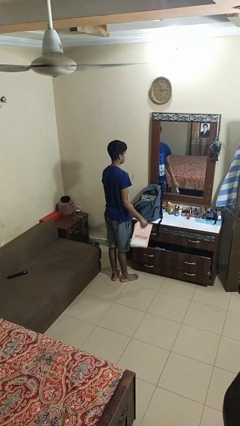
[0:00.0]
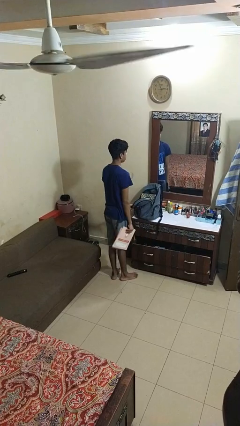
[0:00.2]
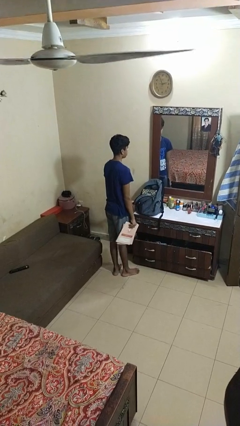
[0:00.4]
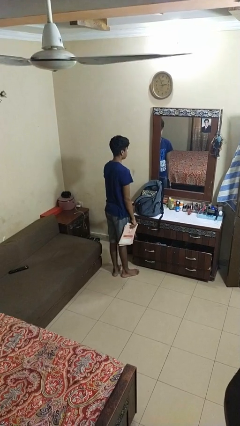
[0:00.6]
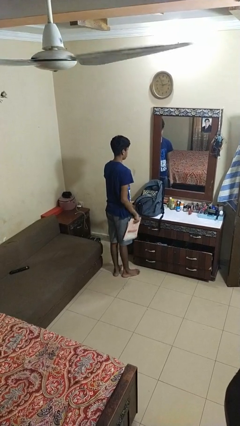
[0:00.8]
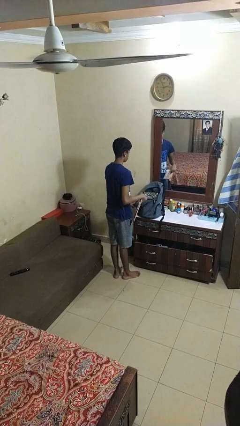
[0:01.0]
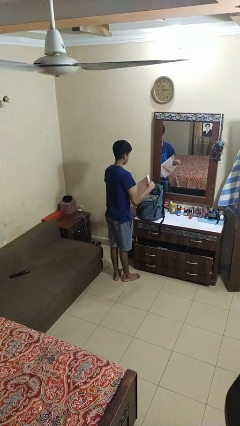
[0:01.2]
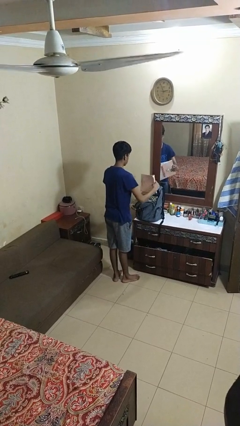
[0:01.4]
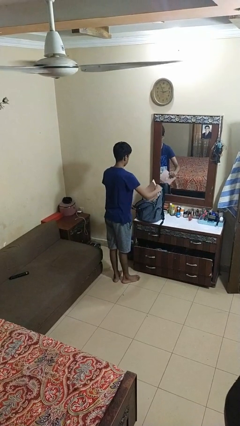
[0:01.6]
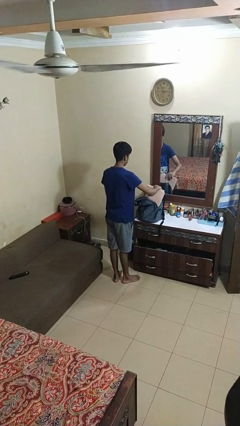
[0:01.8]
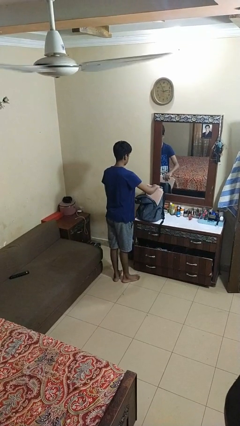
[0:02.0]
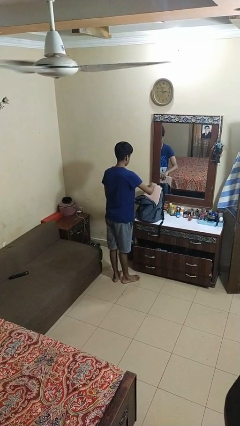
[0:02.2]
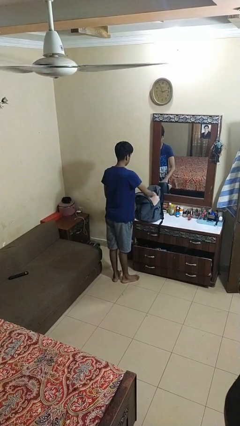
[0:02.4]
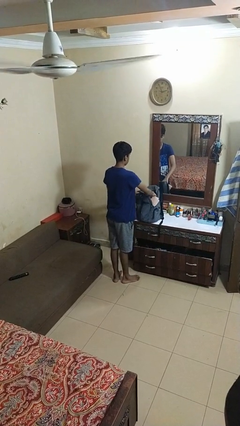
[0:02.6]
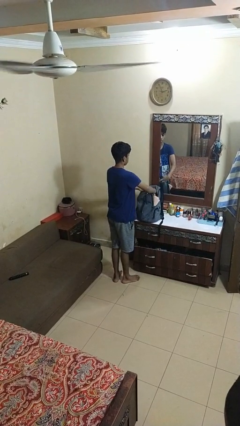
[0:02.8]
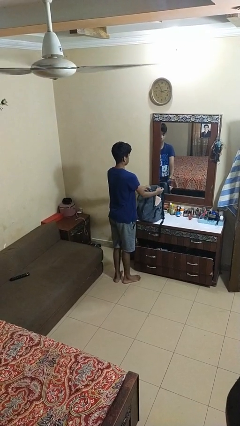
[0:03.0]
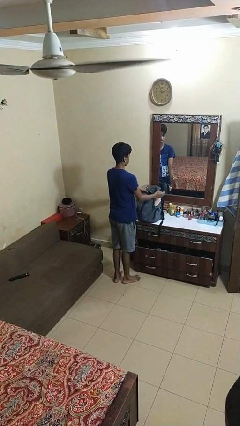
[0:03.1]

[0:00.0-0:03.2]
person puts object into bag

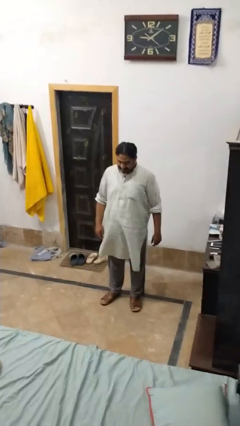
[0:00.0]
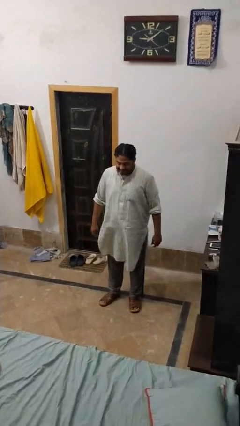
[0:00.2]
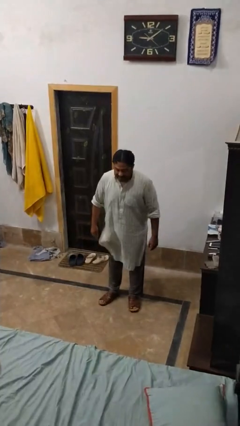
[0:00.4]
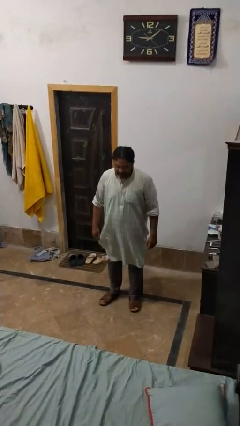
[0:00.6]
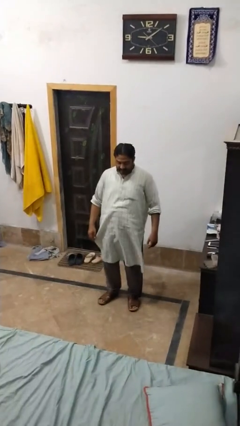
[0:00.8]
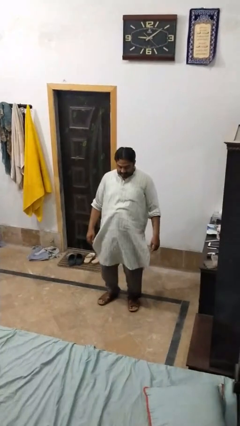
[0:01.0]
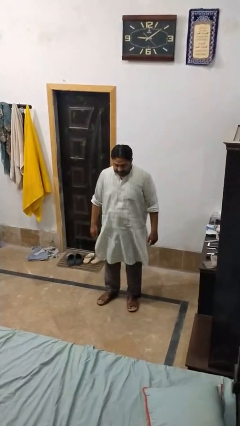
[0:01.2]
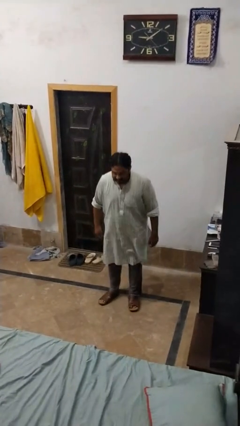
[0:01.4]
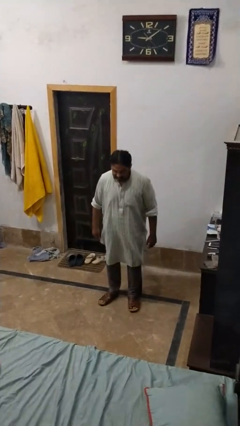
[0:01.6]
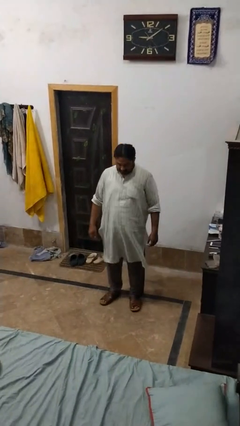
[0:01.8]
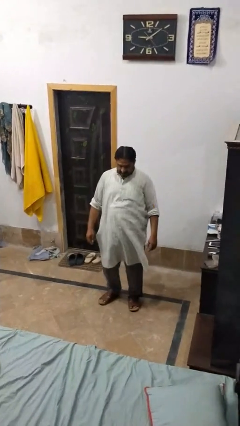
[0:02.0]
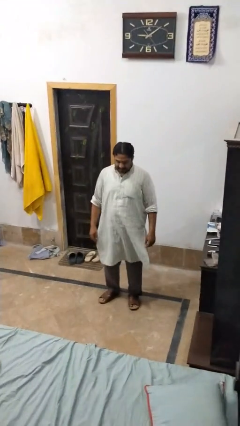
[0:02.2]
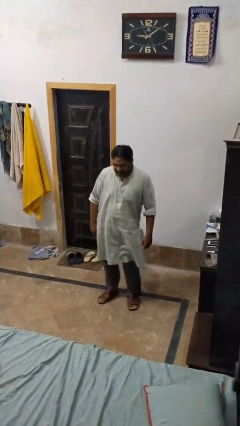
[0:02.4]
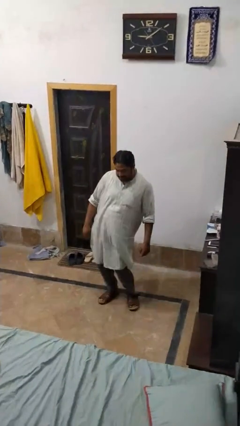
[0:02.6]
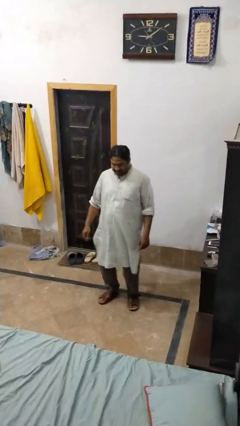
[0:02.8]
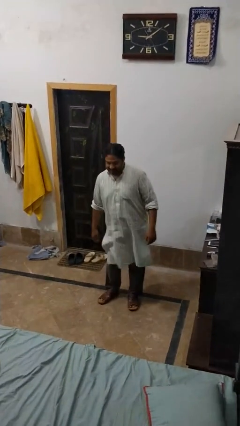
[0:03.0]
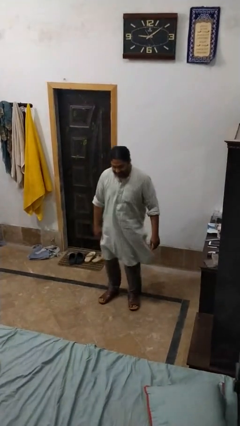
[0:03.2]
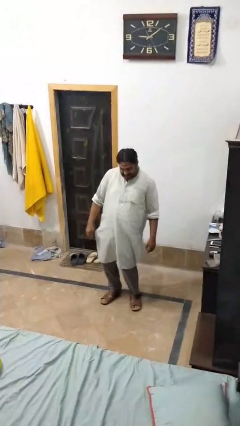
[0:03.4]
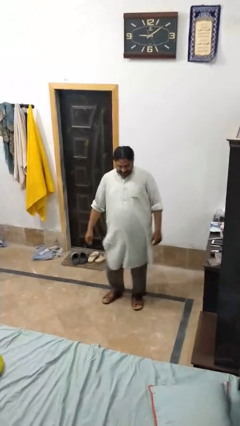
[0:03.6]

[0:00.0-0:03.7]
person wiggles hips

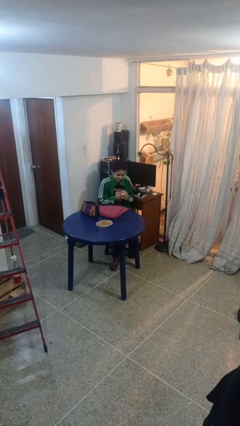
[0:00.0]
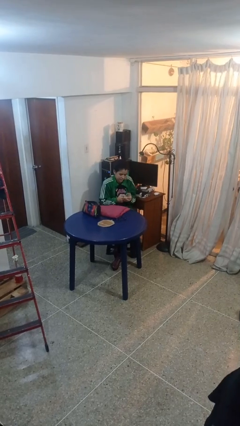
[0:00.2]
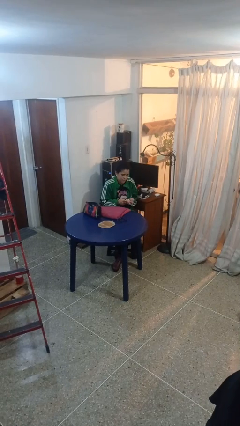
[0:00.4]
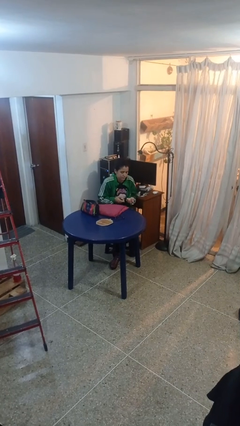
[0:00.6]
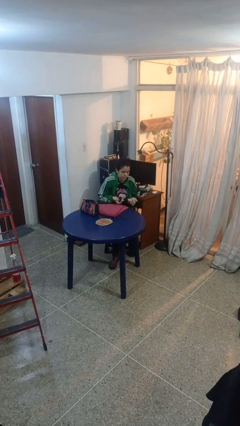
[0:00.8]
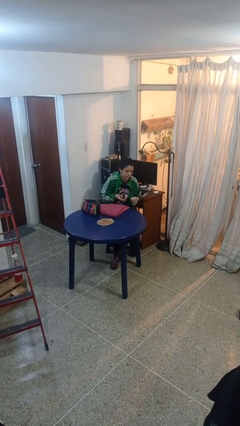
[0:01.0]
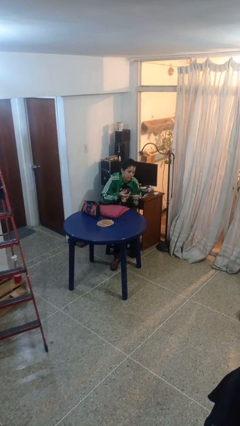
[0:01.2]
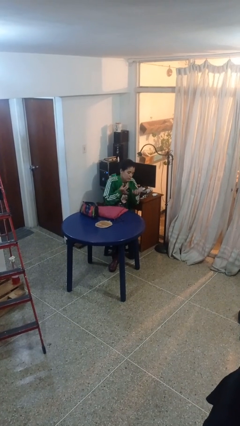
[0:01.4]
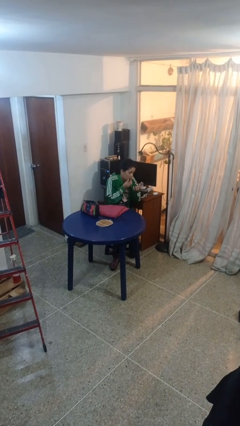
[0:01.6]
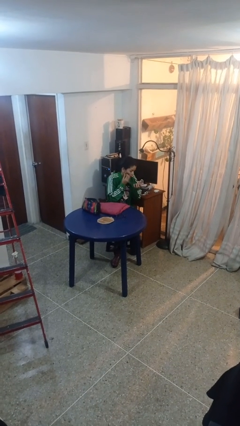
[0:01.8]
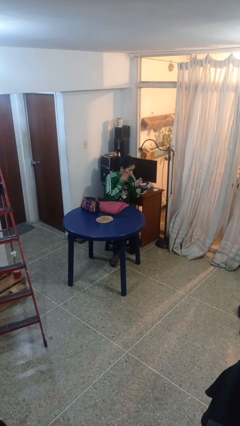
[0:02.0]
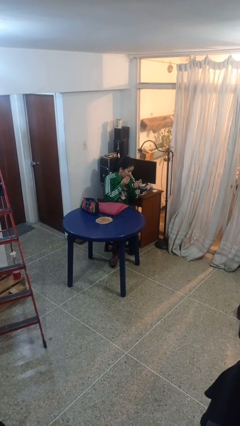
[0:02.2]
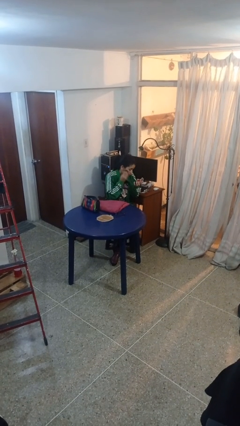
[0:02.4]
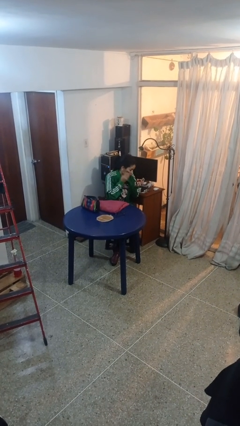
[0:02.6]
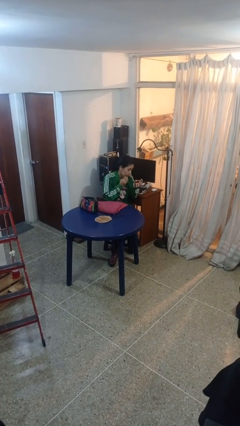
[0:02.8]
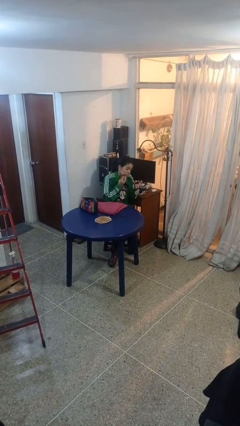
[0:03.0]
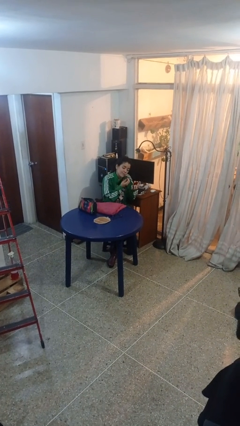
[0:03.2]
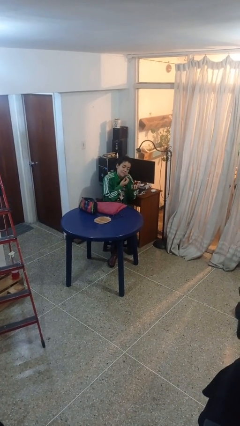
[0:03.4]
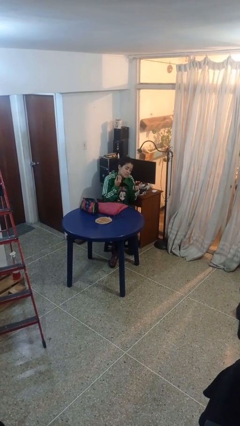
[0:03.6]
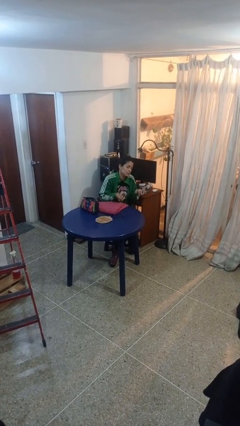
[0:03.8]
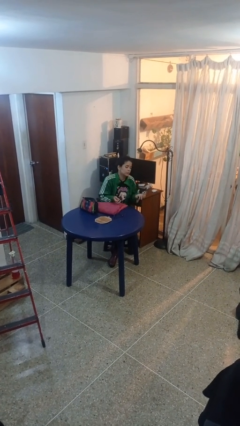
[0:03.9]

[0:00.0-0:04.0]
person applies foundation makeup

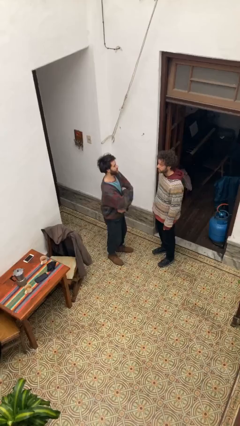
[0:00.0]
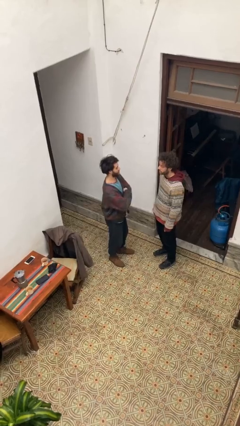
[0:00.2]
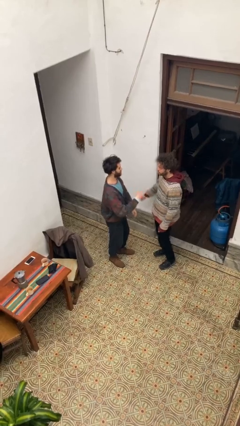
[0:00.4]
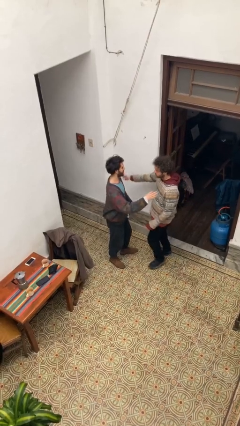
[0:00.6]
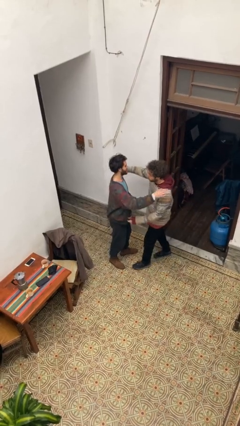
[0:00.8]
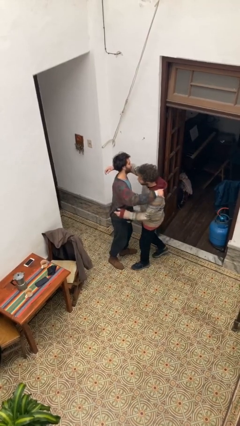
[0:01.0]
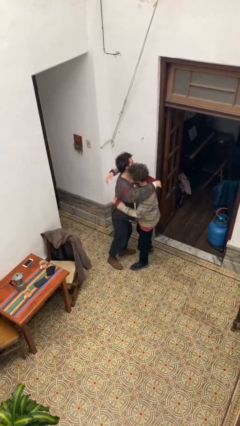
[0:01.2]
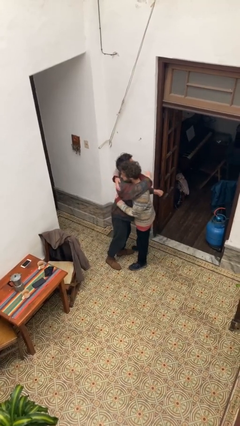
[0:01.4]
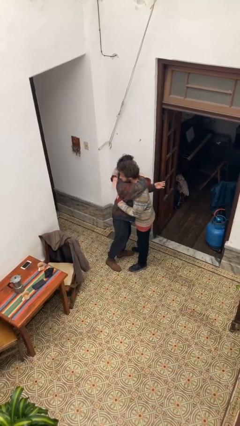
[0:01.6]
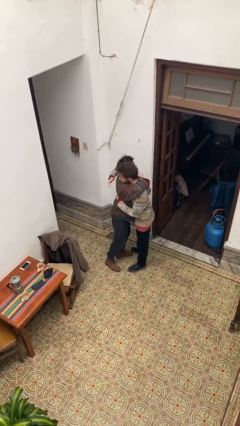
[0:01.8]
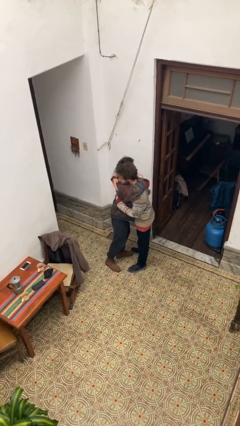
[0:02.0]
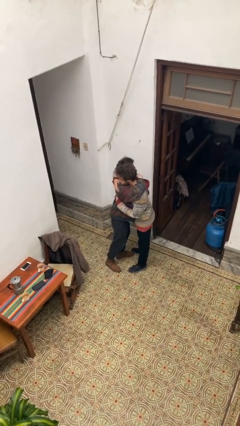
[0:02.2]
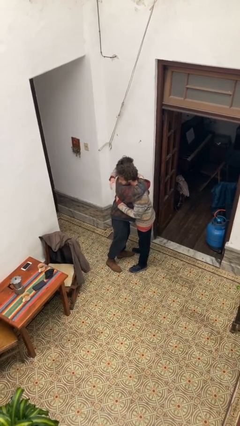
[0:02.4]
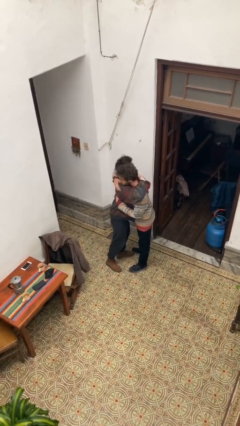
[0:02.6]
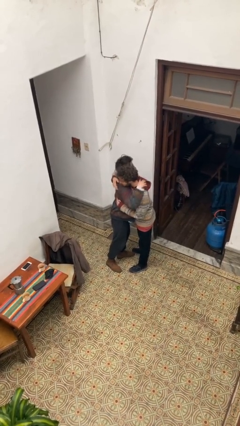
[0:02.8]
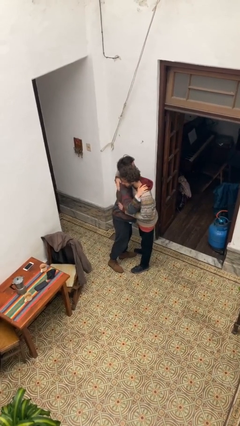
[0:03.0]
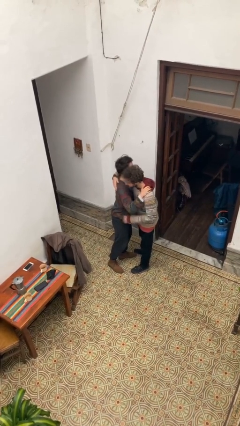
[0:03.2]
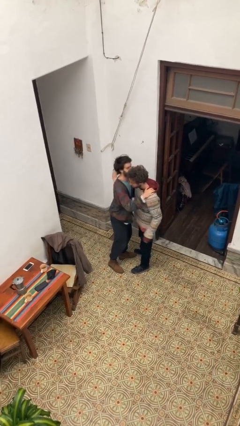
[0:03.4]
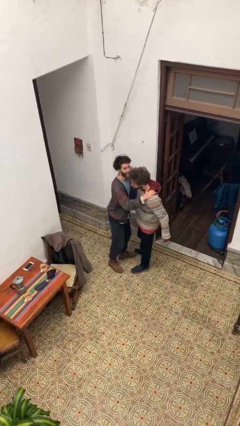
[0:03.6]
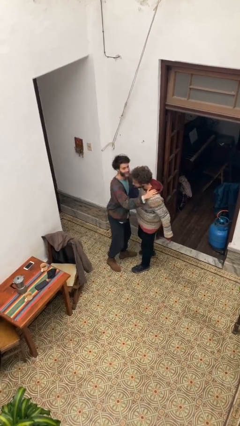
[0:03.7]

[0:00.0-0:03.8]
person embraces person

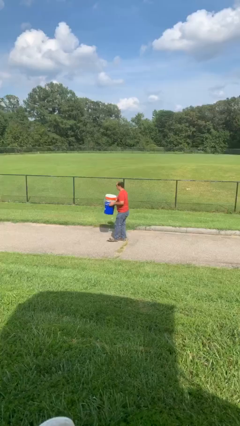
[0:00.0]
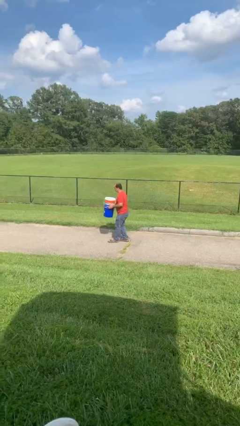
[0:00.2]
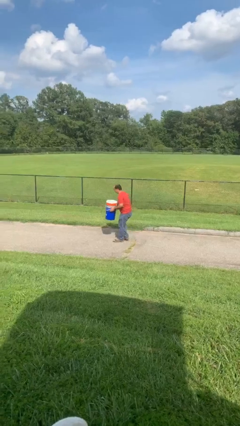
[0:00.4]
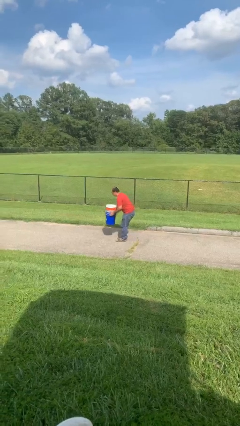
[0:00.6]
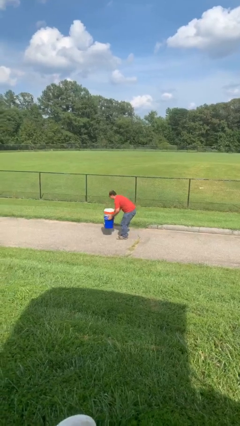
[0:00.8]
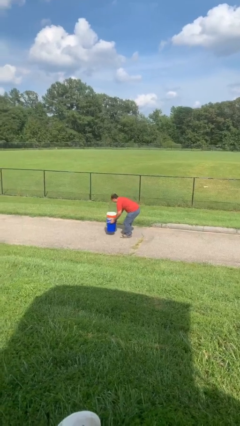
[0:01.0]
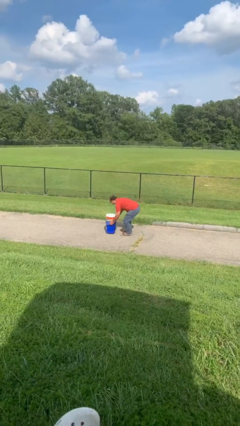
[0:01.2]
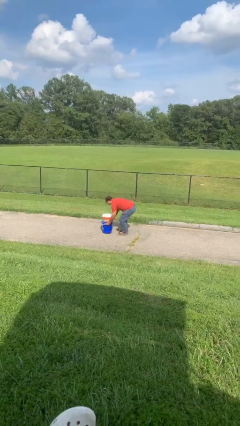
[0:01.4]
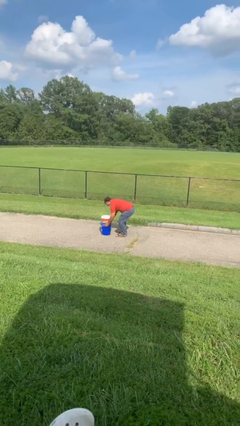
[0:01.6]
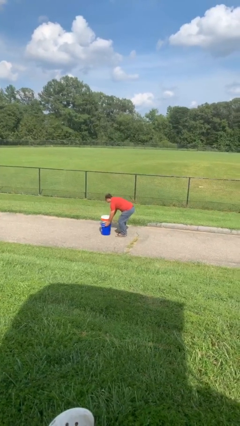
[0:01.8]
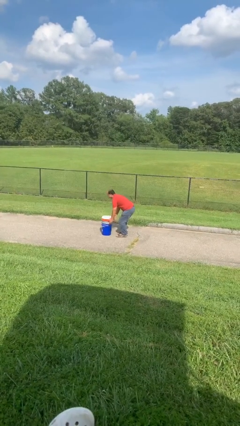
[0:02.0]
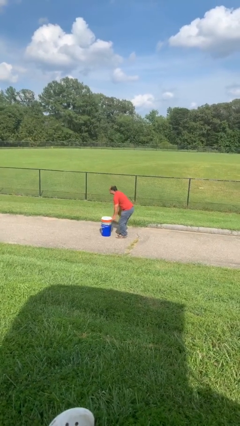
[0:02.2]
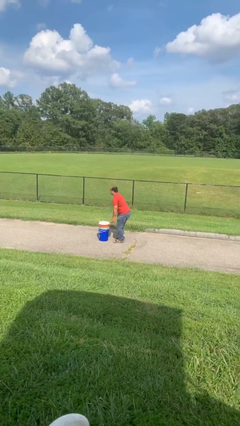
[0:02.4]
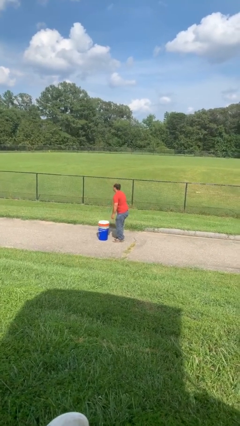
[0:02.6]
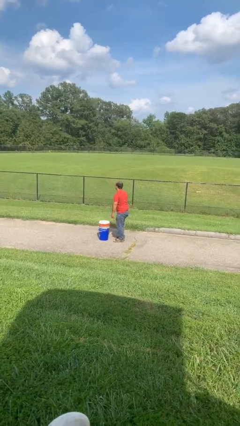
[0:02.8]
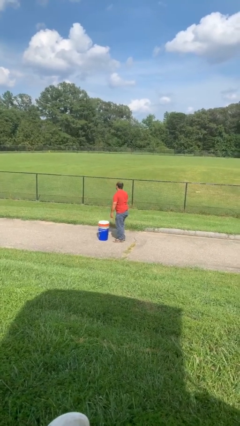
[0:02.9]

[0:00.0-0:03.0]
person puts down object on floor
